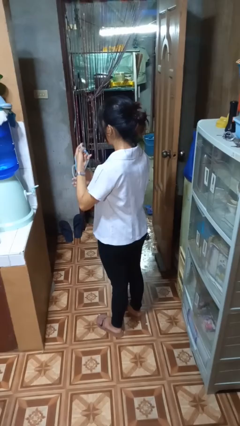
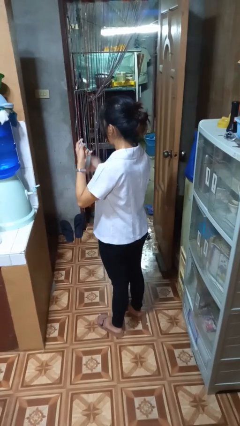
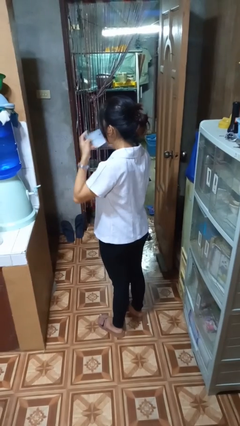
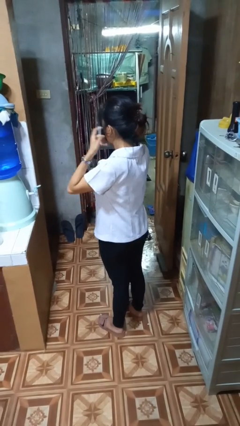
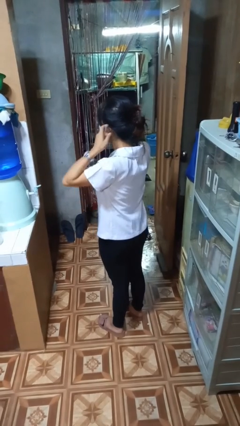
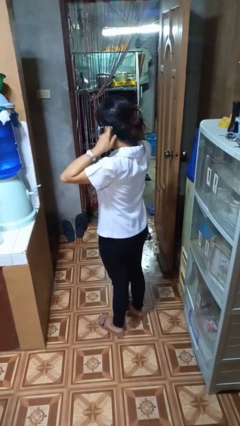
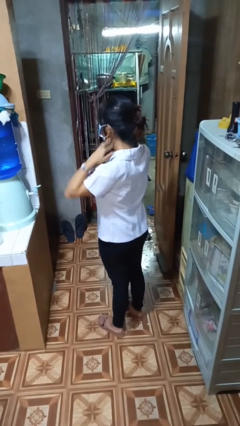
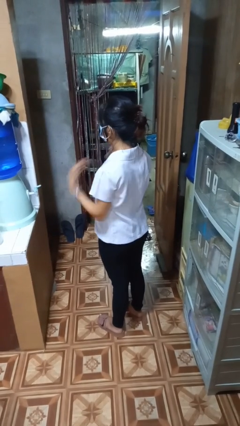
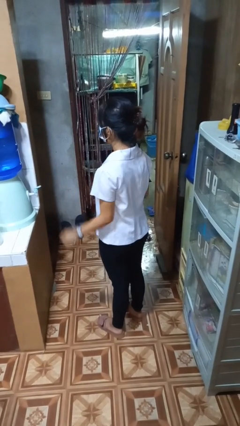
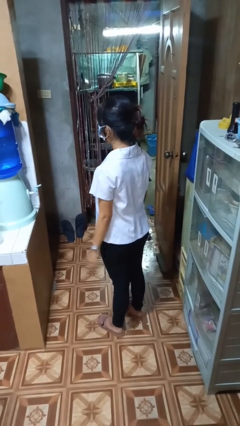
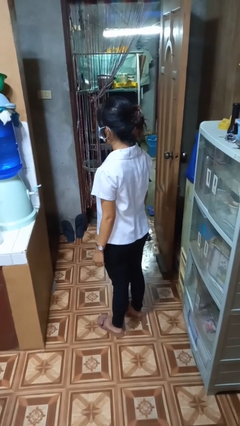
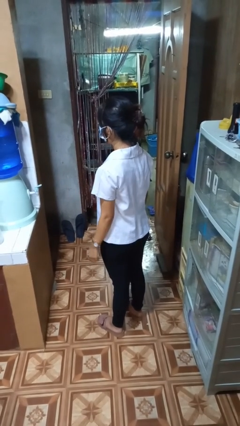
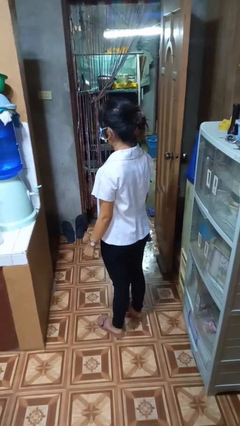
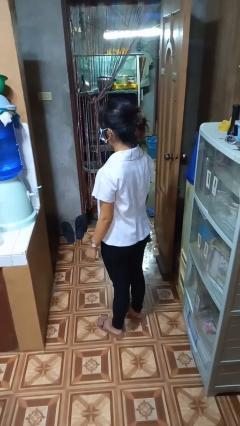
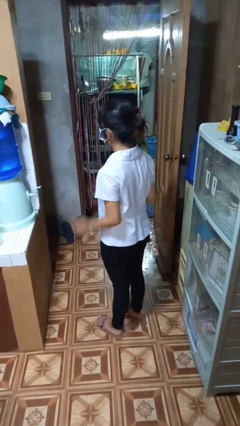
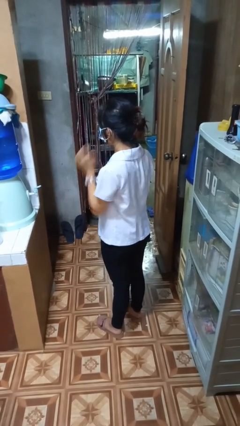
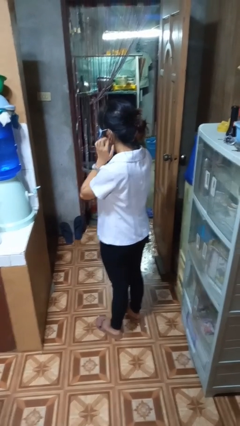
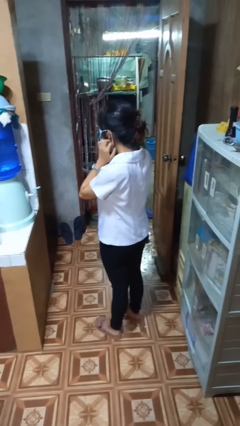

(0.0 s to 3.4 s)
person puts on facemask

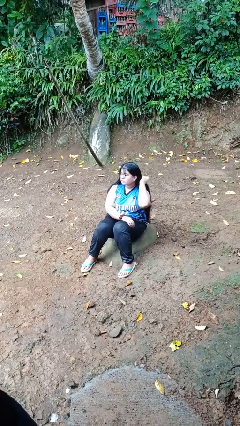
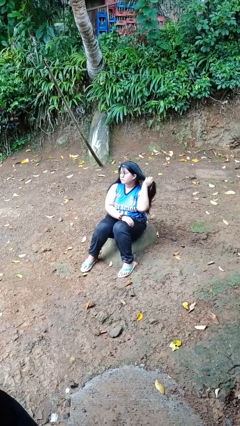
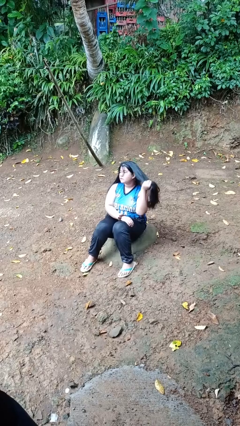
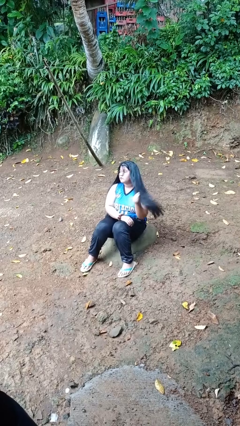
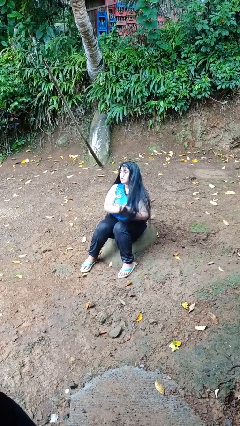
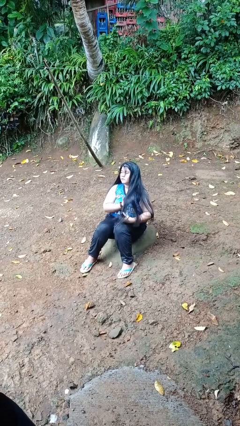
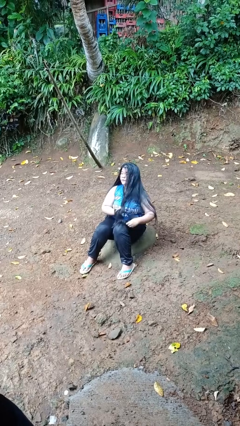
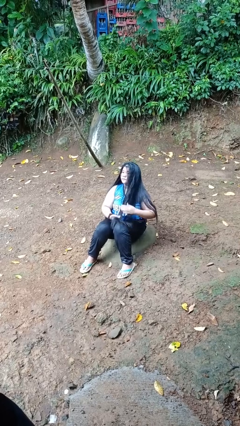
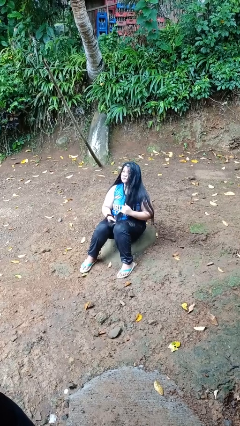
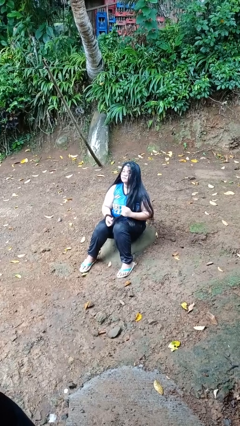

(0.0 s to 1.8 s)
person strokes hair

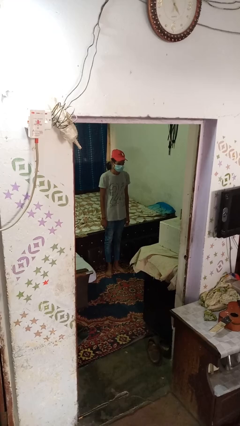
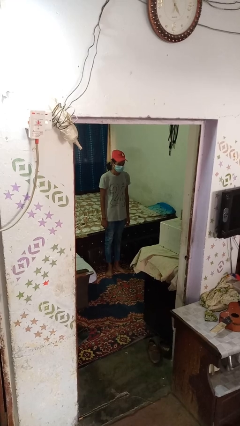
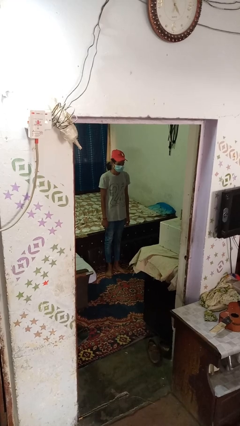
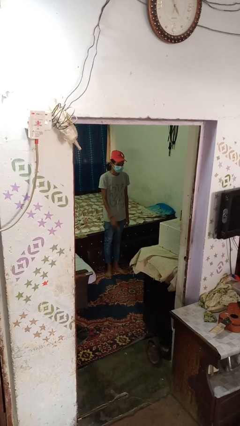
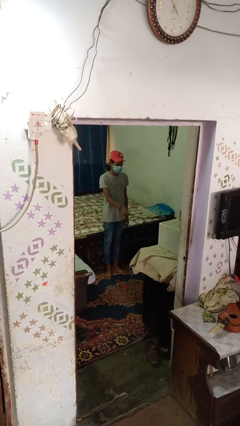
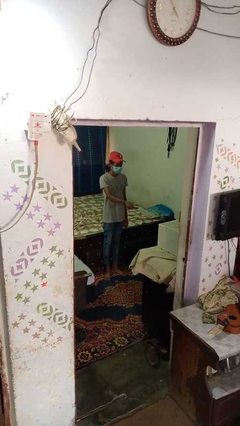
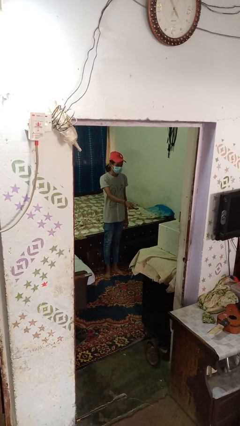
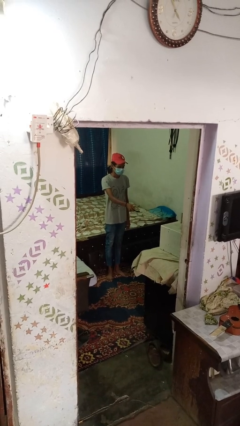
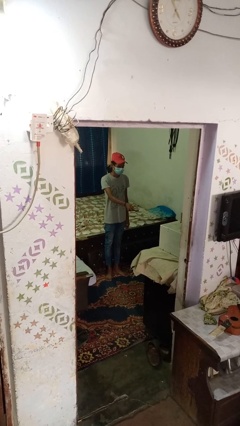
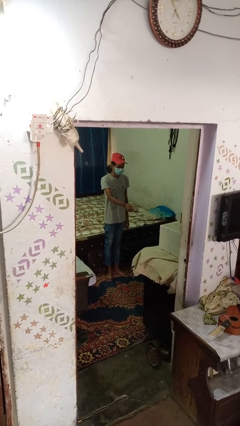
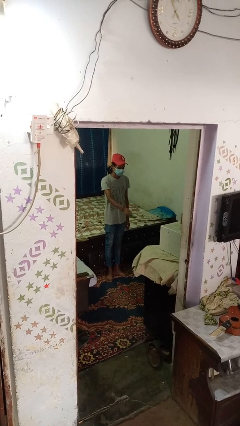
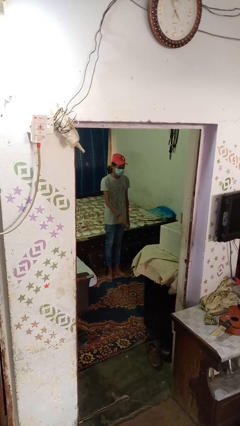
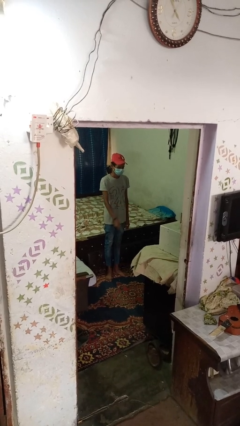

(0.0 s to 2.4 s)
person uses television remote

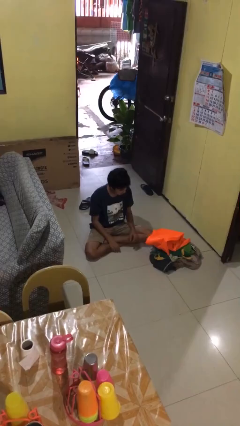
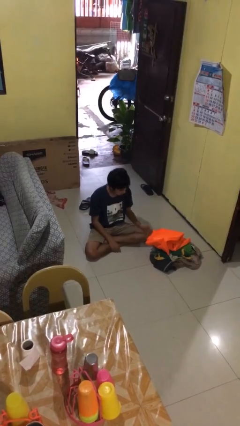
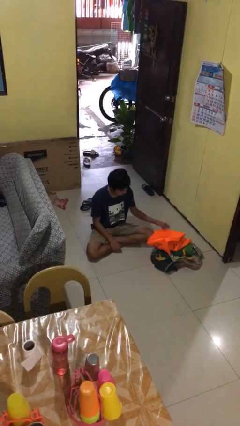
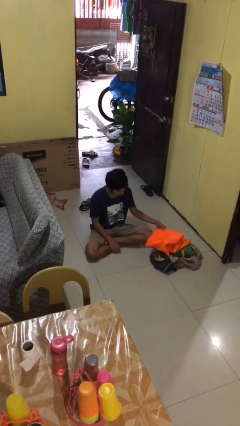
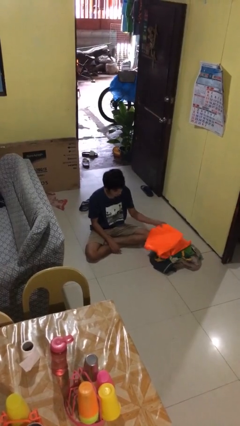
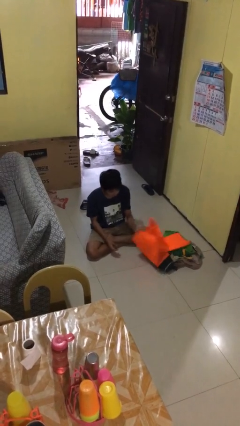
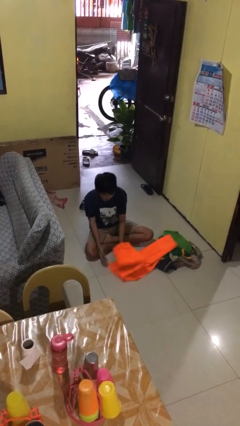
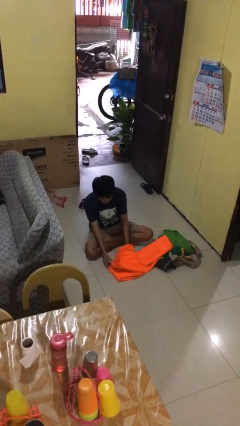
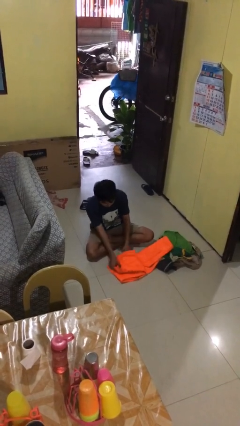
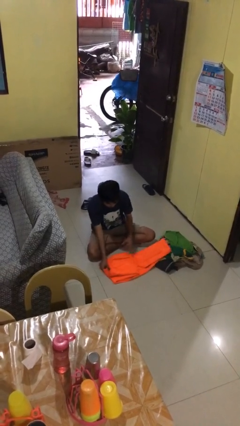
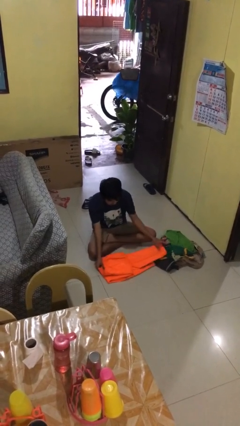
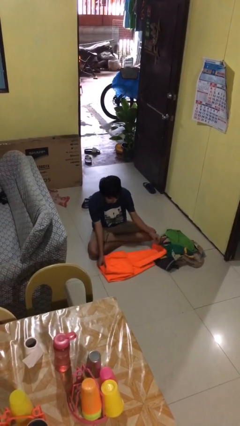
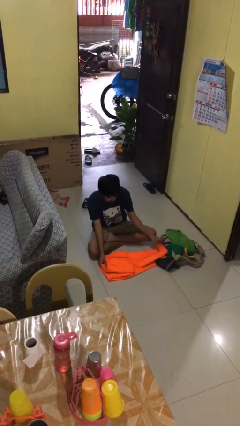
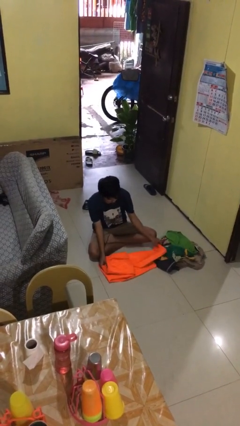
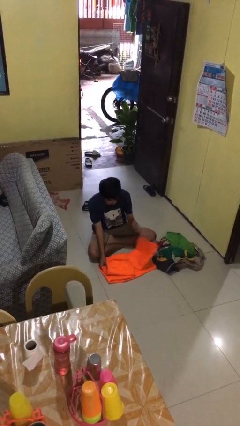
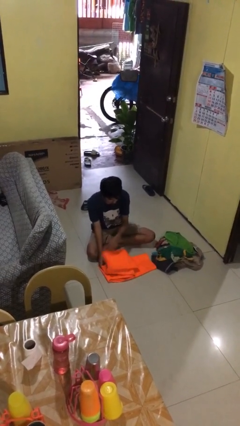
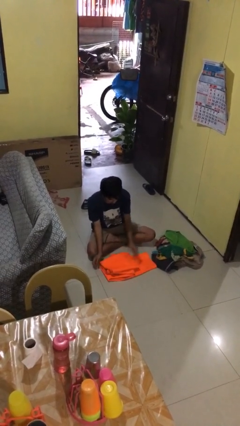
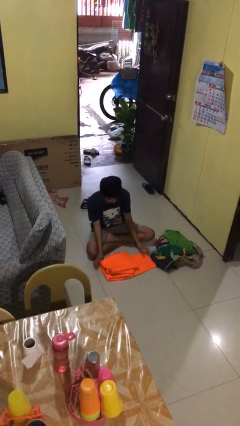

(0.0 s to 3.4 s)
person folds pants

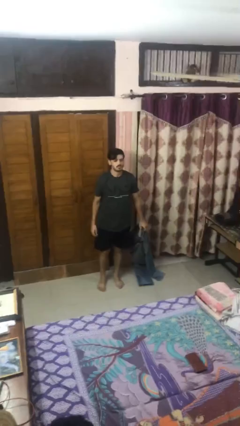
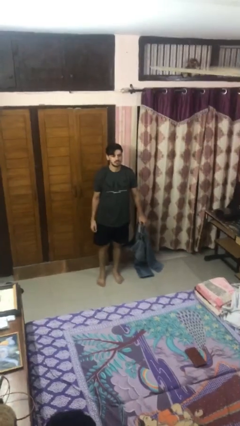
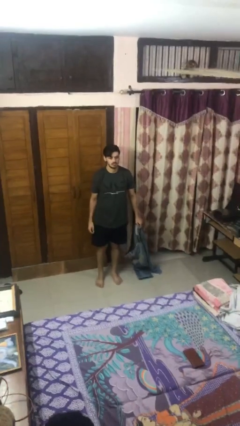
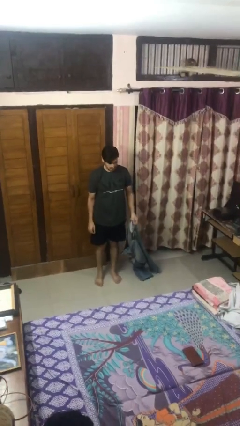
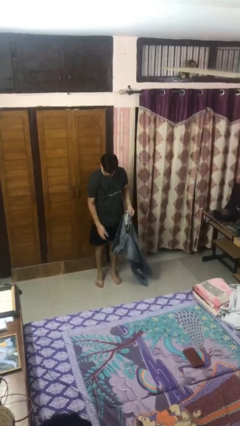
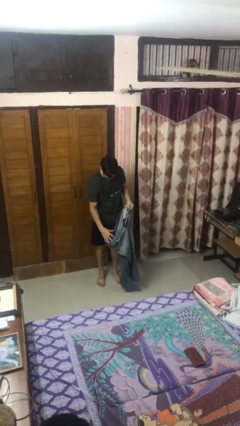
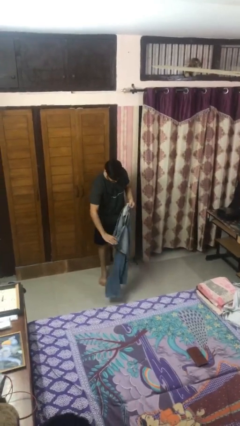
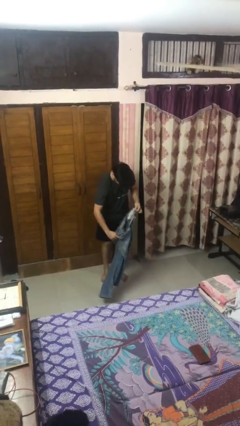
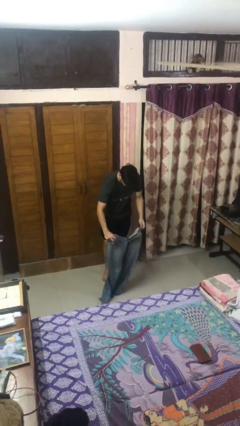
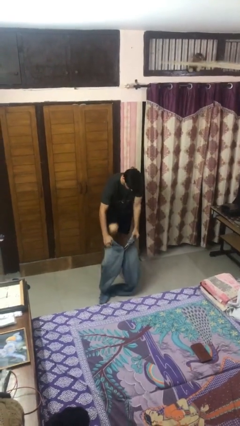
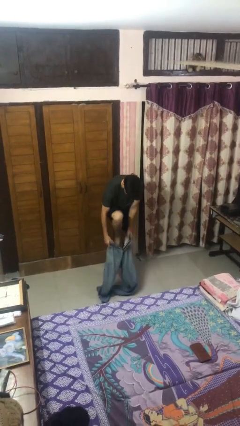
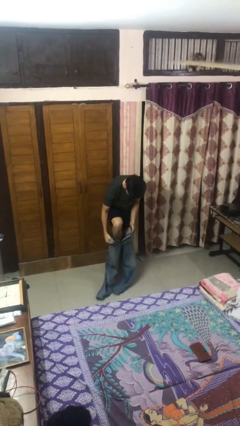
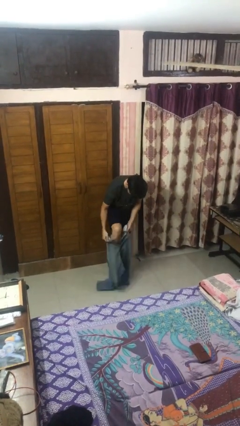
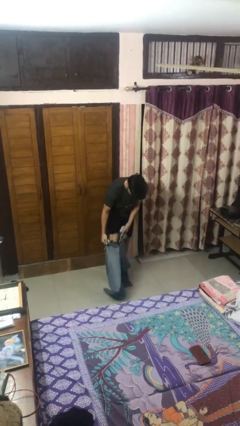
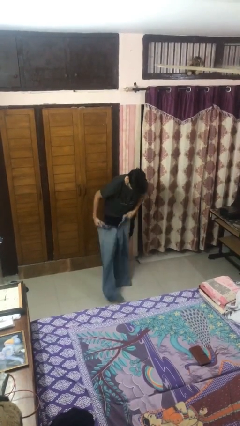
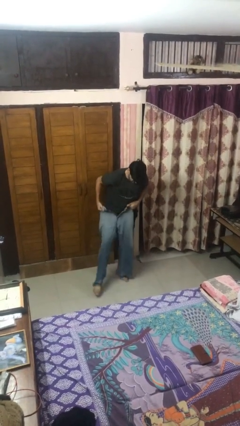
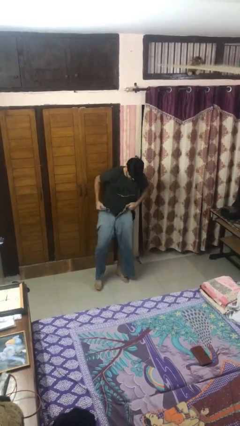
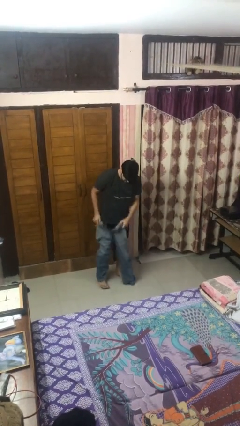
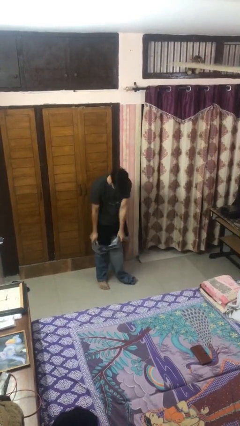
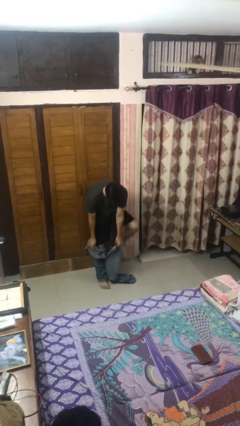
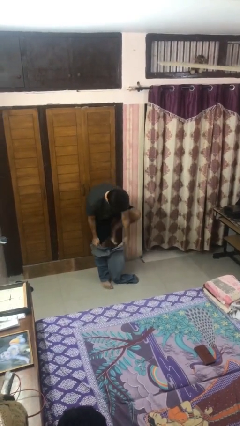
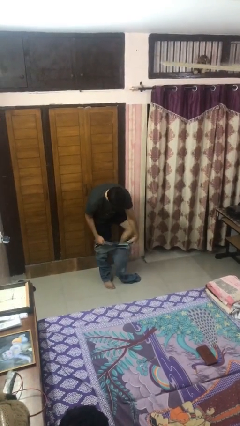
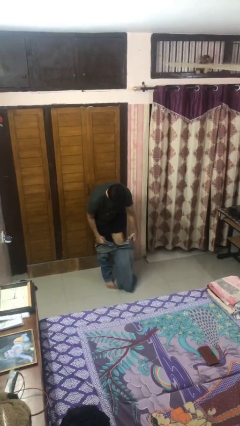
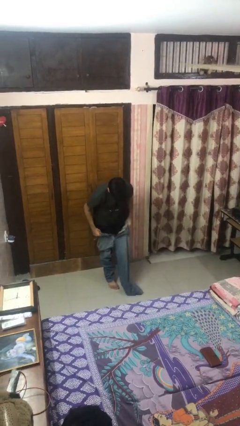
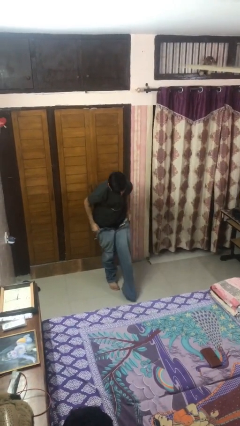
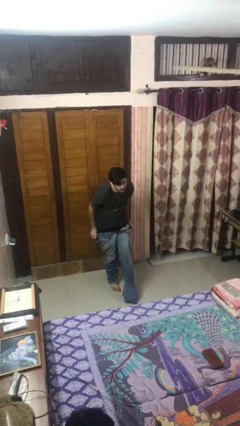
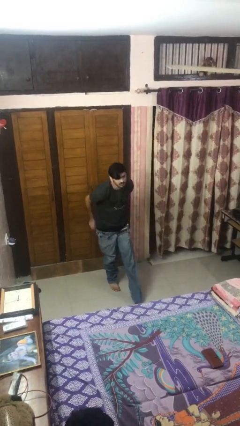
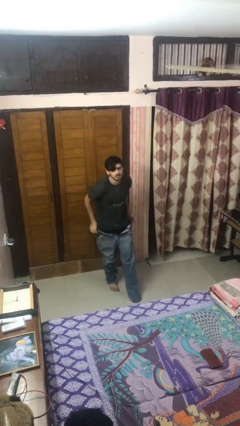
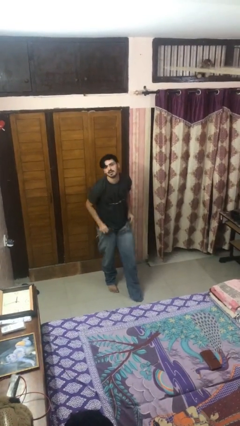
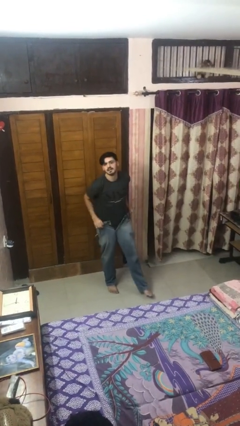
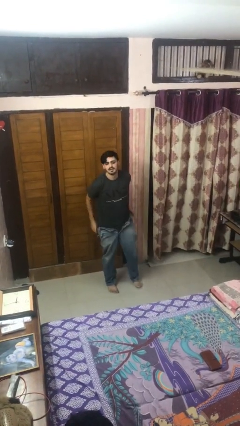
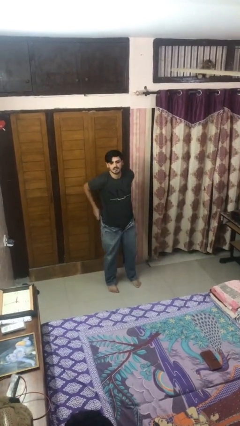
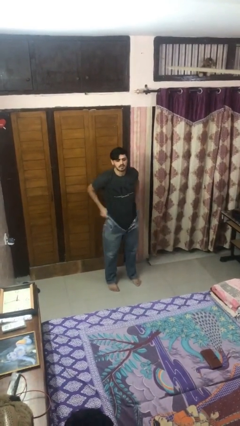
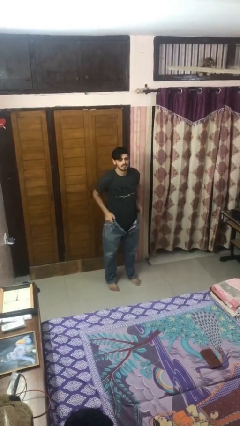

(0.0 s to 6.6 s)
person puts on pants
